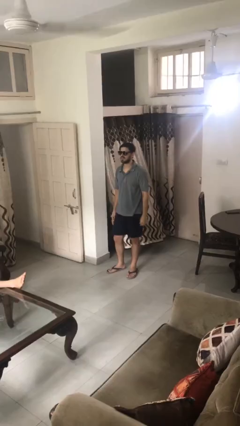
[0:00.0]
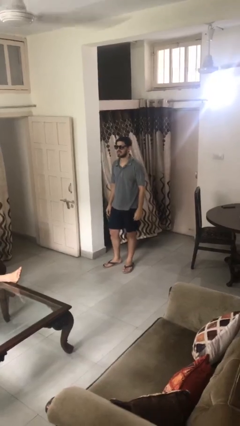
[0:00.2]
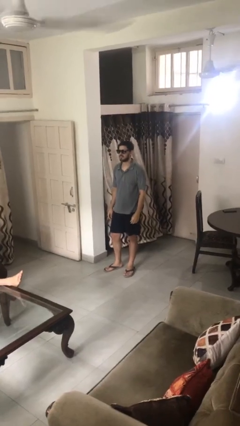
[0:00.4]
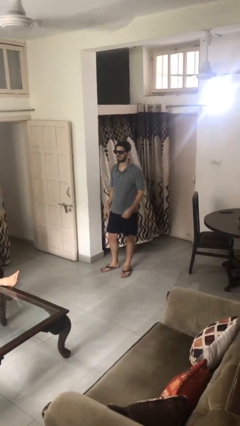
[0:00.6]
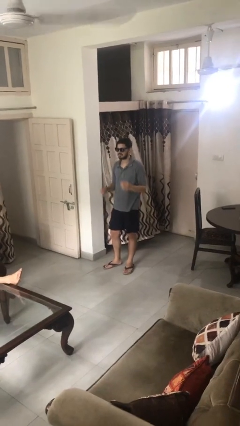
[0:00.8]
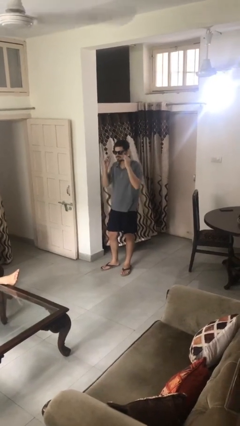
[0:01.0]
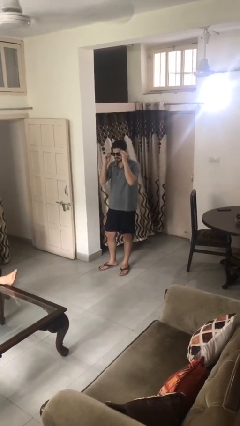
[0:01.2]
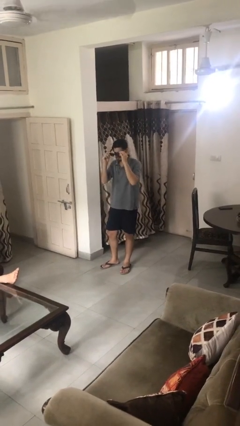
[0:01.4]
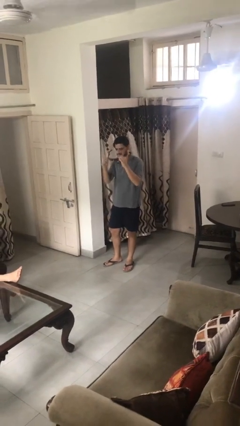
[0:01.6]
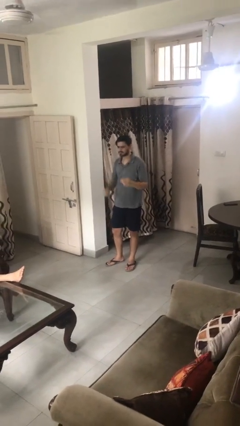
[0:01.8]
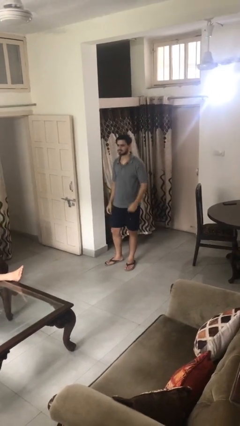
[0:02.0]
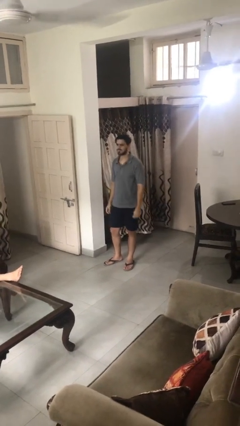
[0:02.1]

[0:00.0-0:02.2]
person takes off sunglasses

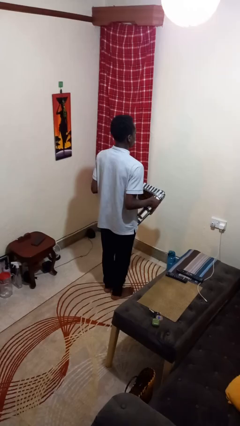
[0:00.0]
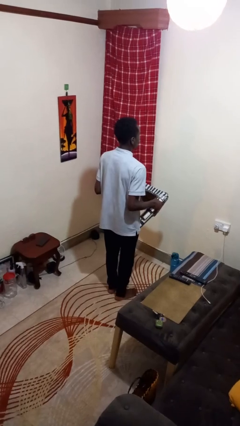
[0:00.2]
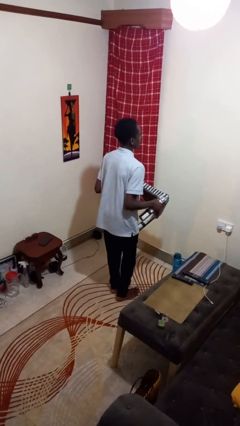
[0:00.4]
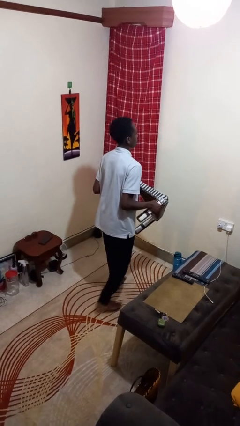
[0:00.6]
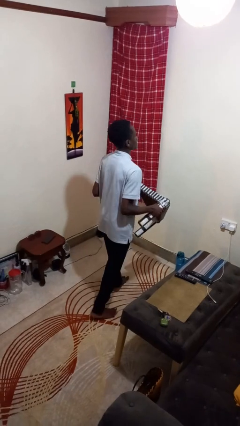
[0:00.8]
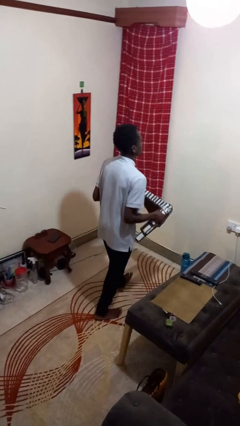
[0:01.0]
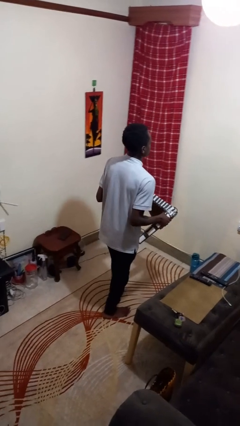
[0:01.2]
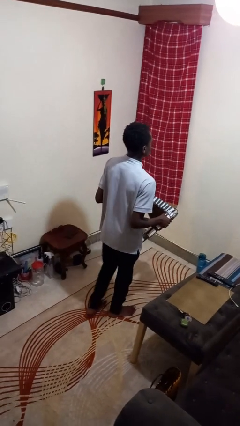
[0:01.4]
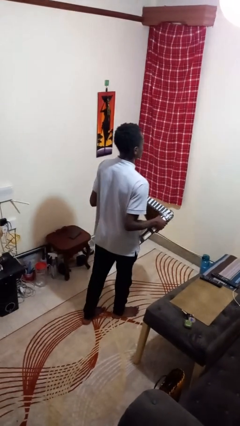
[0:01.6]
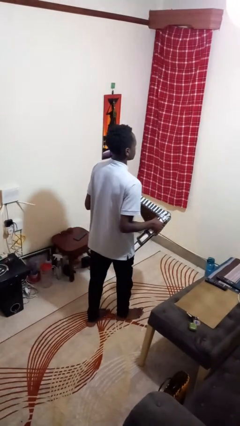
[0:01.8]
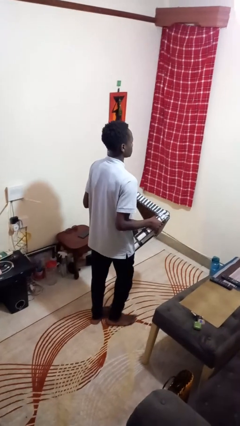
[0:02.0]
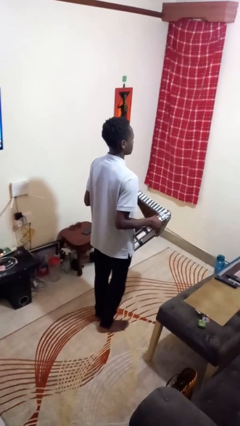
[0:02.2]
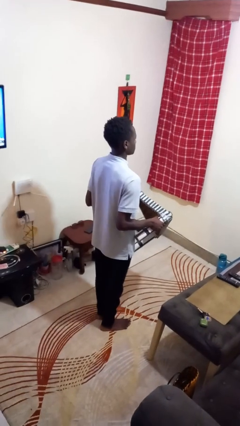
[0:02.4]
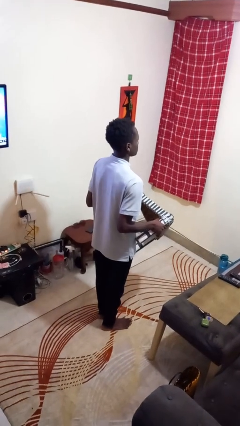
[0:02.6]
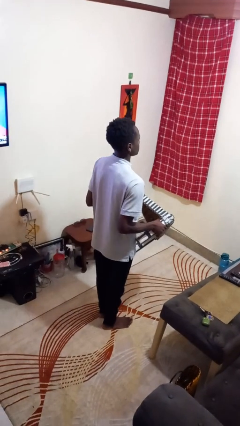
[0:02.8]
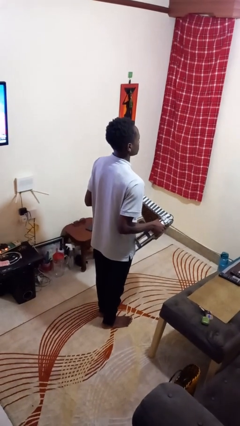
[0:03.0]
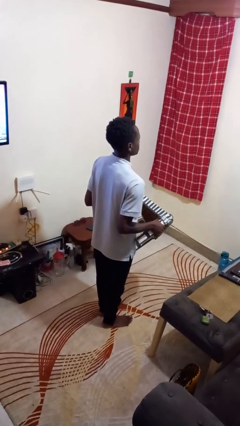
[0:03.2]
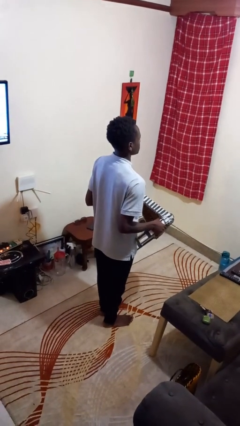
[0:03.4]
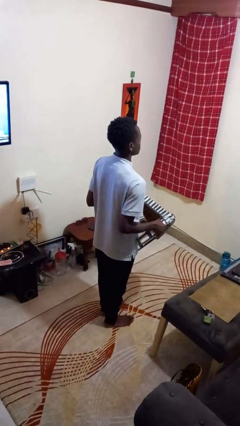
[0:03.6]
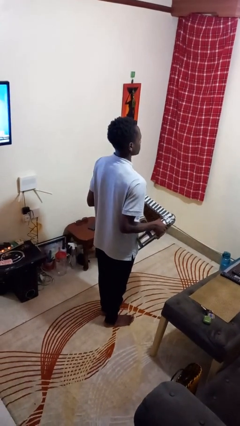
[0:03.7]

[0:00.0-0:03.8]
person carries furniture

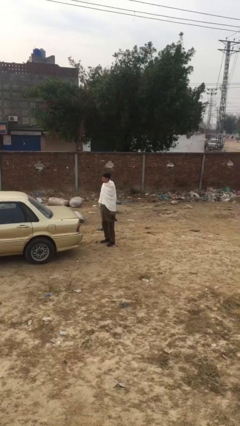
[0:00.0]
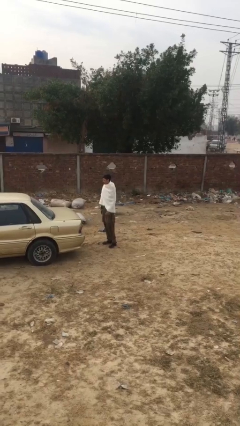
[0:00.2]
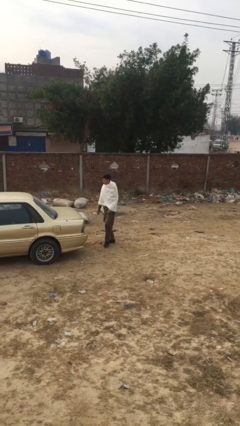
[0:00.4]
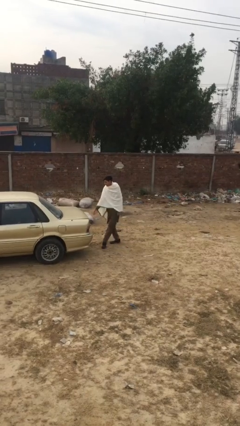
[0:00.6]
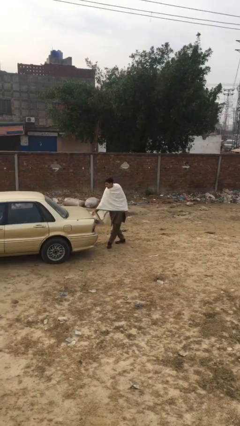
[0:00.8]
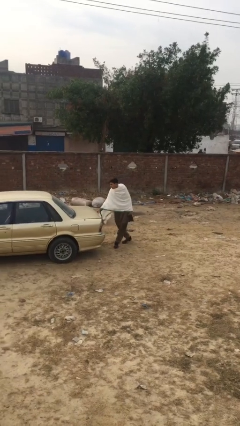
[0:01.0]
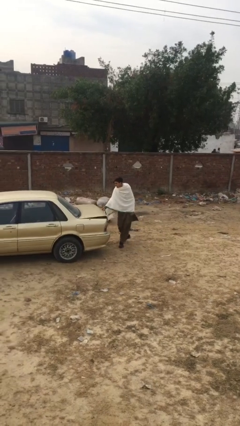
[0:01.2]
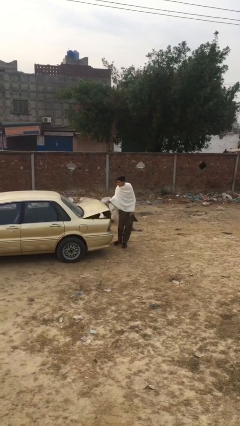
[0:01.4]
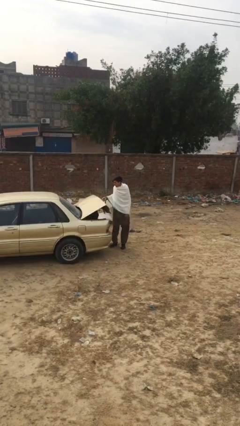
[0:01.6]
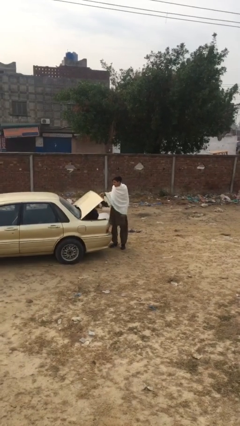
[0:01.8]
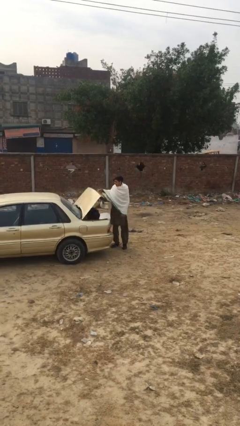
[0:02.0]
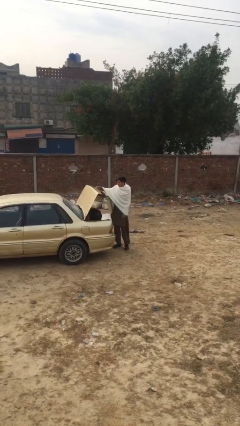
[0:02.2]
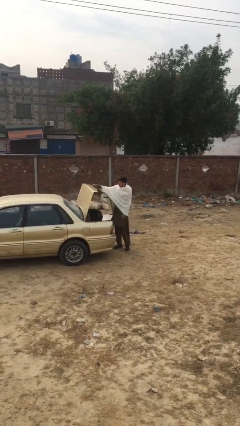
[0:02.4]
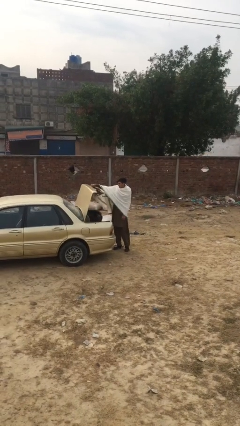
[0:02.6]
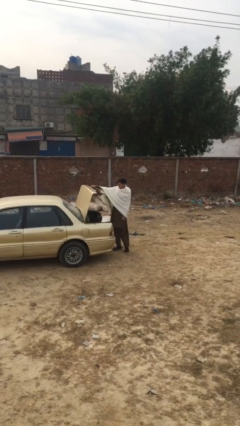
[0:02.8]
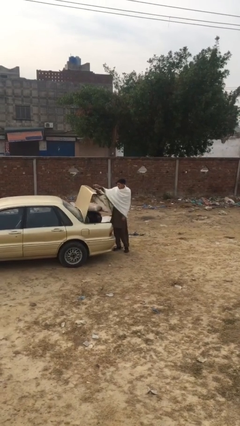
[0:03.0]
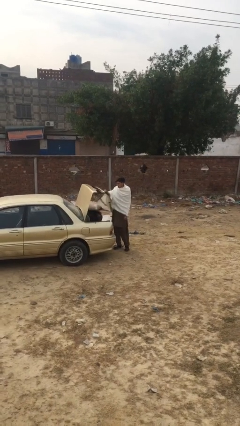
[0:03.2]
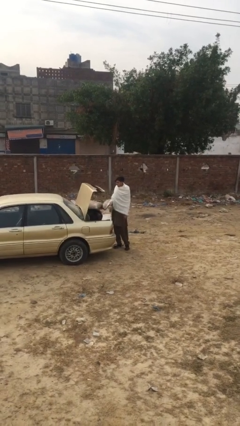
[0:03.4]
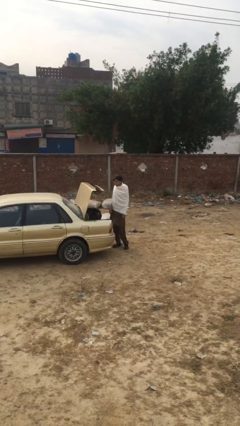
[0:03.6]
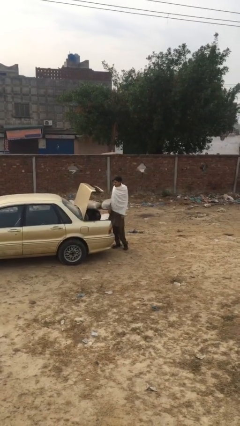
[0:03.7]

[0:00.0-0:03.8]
person opens car trunk

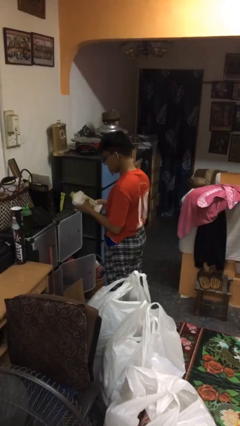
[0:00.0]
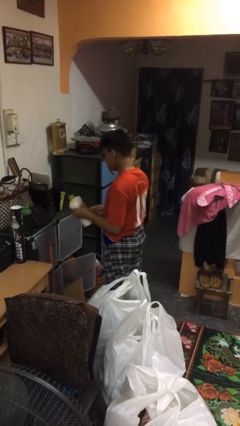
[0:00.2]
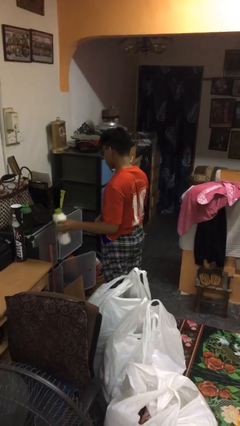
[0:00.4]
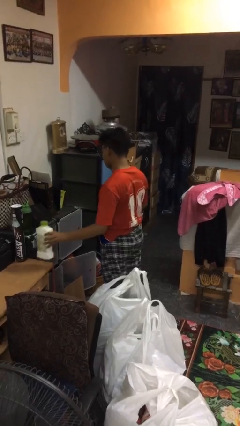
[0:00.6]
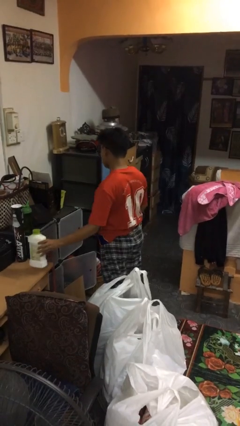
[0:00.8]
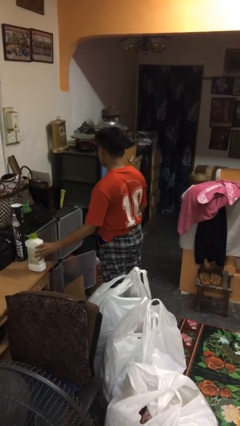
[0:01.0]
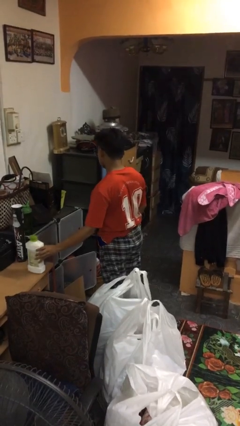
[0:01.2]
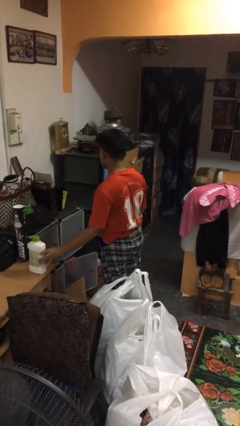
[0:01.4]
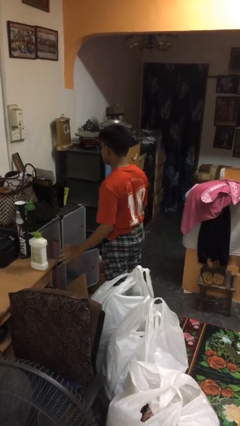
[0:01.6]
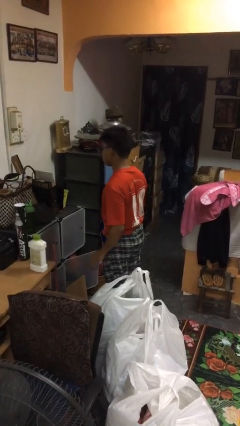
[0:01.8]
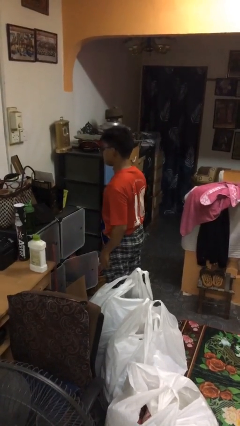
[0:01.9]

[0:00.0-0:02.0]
person puts down object on countertop

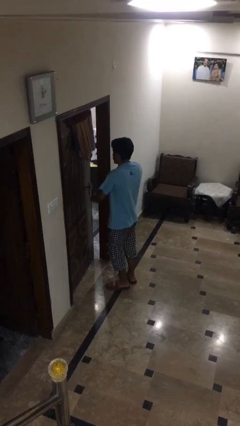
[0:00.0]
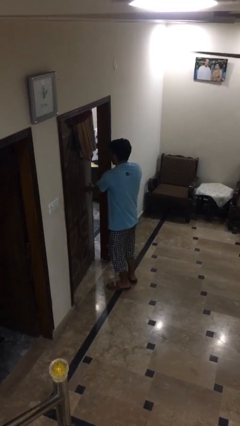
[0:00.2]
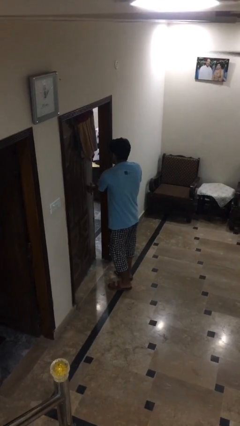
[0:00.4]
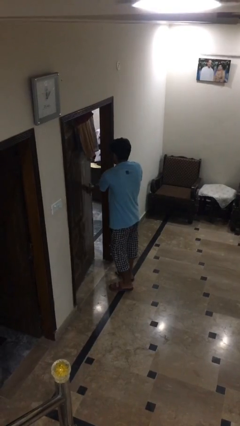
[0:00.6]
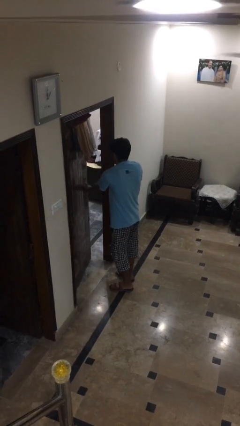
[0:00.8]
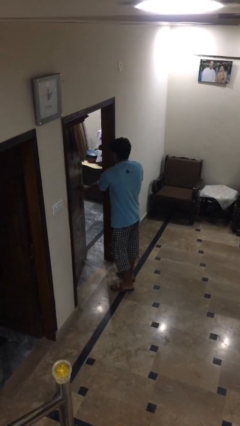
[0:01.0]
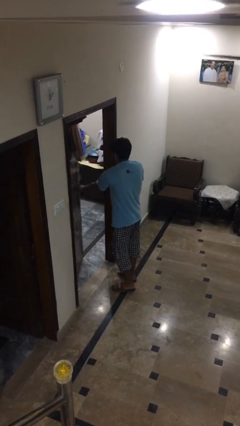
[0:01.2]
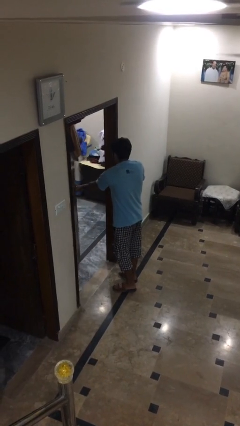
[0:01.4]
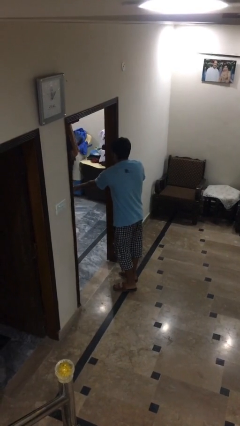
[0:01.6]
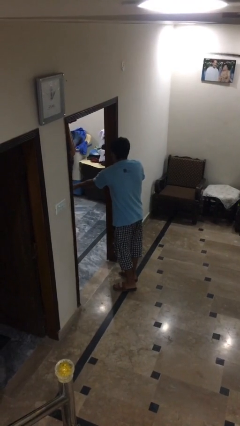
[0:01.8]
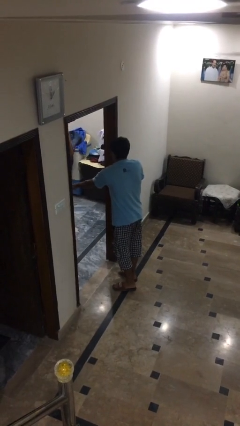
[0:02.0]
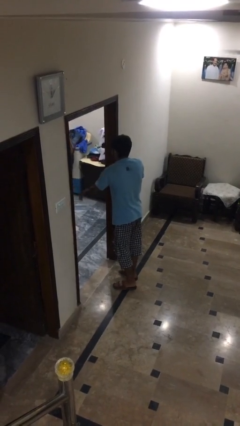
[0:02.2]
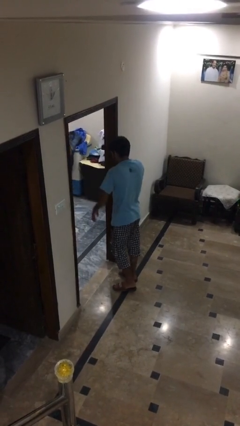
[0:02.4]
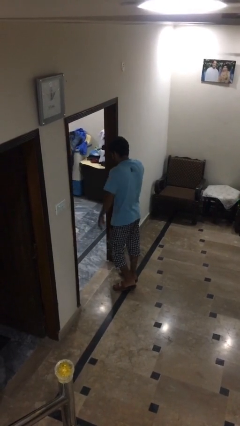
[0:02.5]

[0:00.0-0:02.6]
person opens facility door

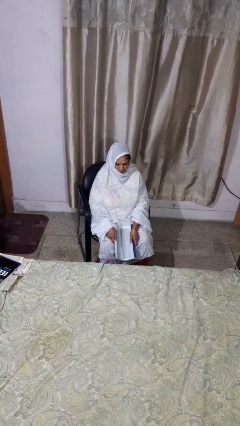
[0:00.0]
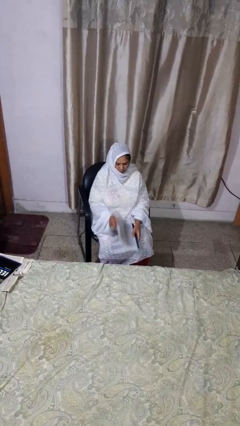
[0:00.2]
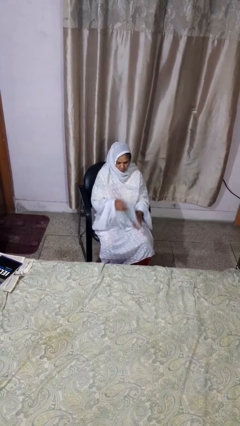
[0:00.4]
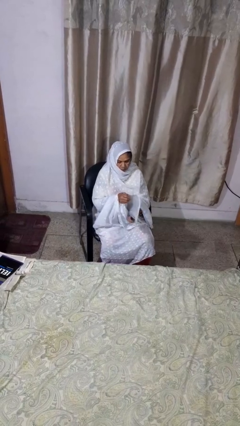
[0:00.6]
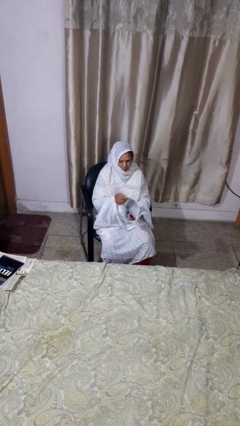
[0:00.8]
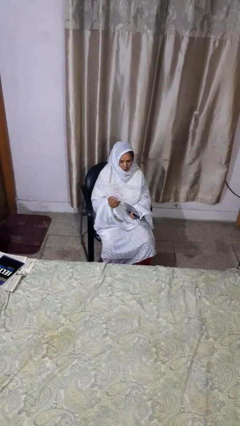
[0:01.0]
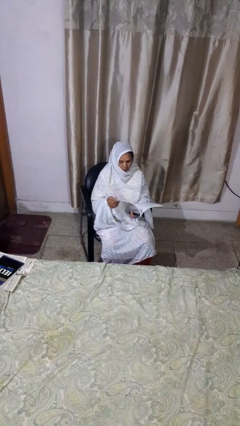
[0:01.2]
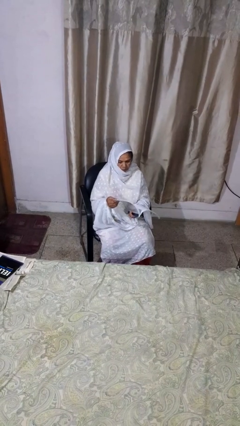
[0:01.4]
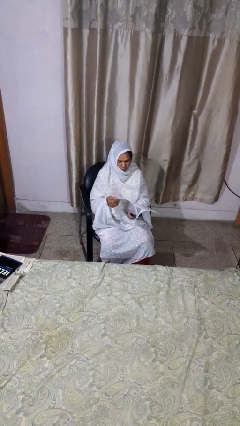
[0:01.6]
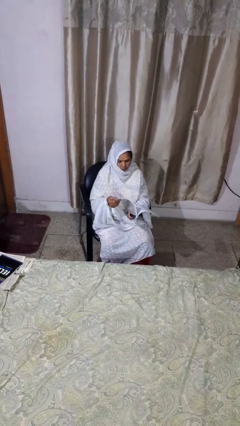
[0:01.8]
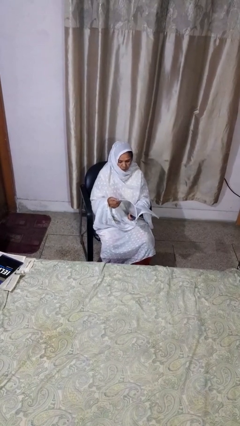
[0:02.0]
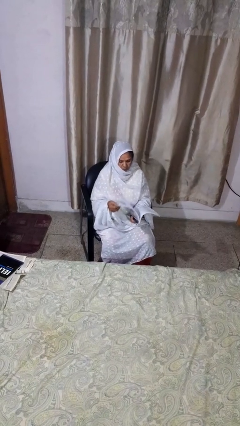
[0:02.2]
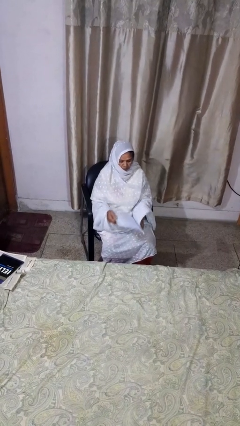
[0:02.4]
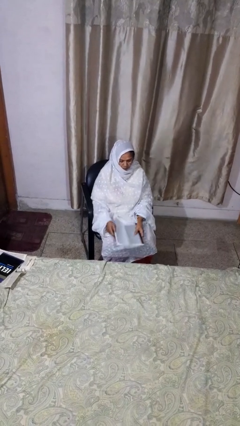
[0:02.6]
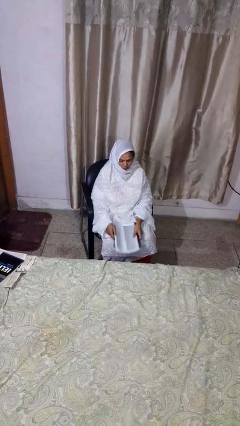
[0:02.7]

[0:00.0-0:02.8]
person reads magazine
